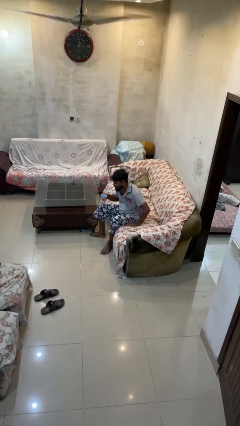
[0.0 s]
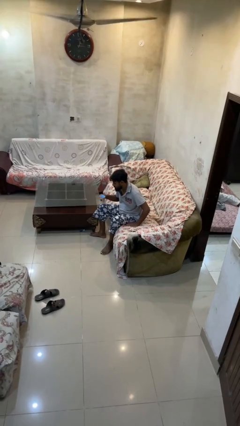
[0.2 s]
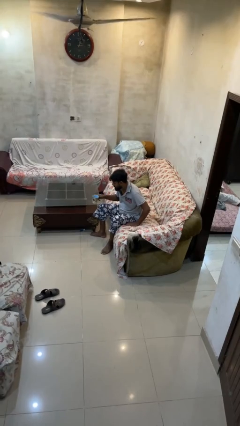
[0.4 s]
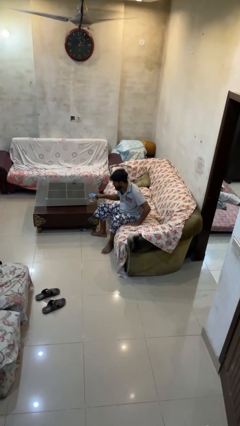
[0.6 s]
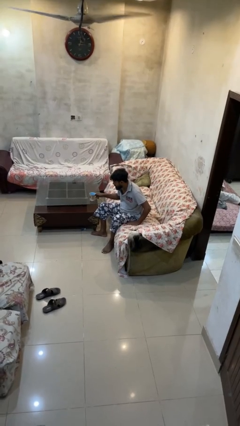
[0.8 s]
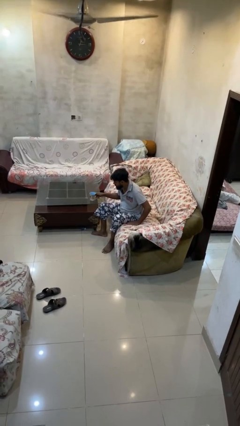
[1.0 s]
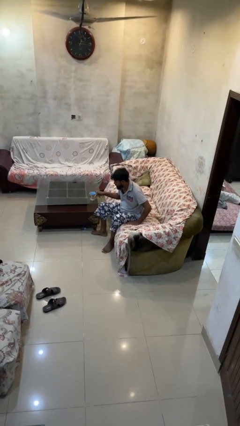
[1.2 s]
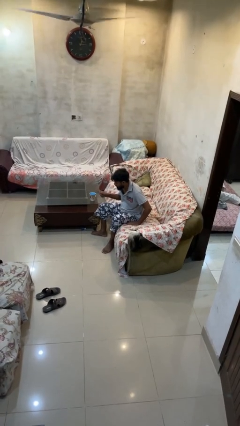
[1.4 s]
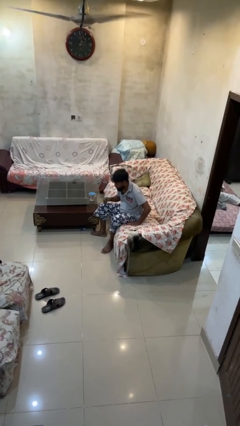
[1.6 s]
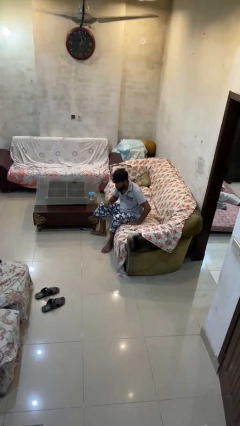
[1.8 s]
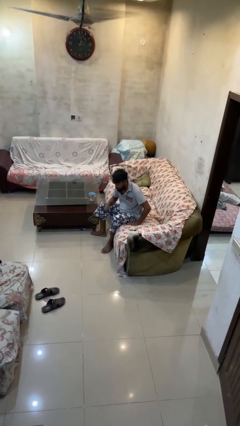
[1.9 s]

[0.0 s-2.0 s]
person puts down object on table

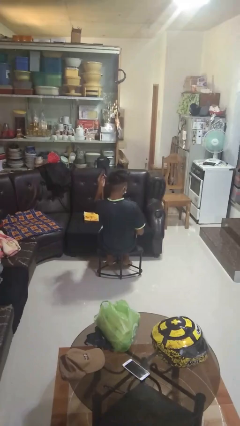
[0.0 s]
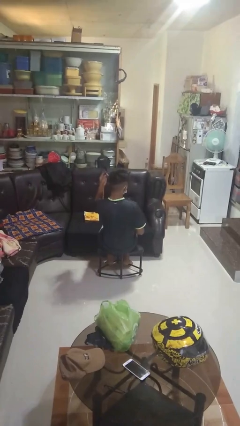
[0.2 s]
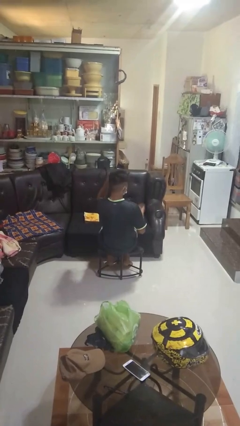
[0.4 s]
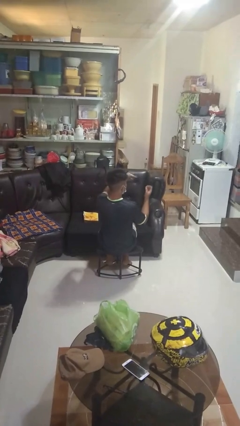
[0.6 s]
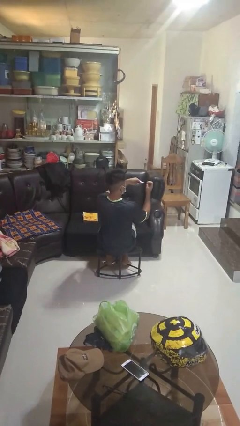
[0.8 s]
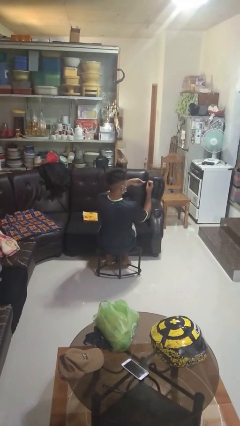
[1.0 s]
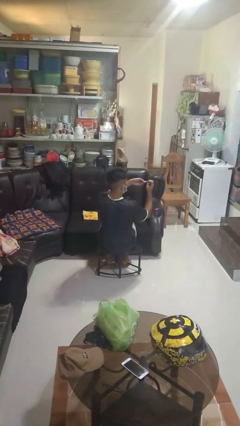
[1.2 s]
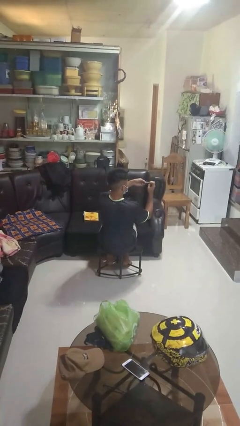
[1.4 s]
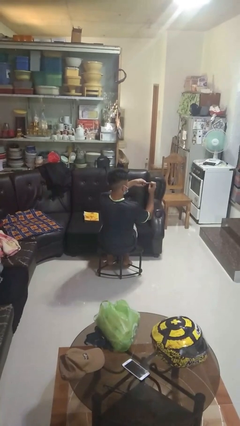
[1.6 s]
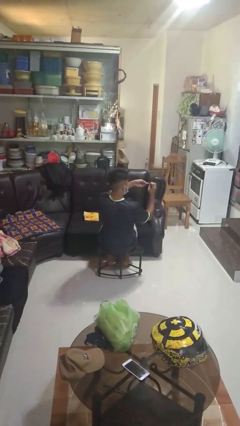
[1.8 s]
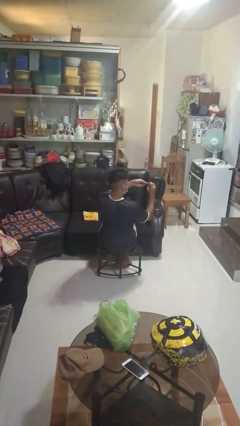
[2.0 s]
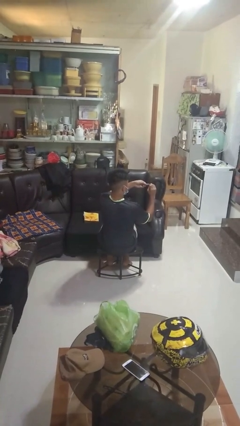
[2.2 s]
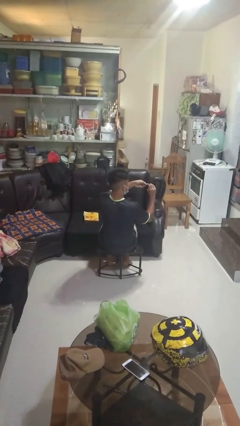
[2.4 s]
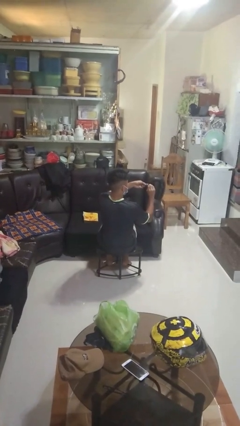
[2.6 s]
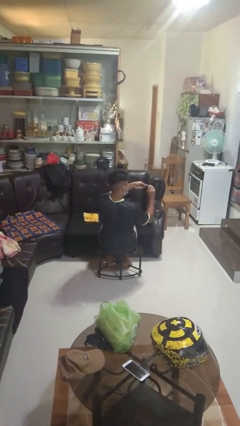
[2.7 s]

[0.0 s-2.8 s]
person clips fingernails

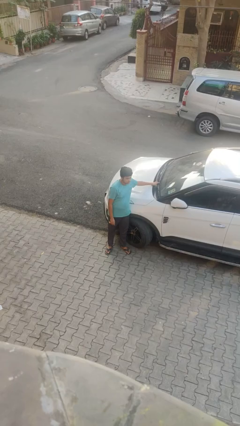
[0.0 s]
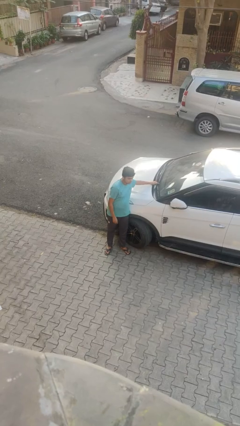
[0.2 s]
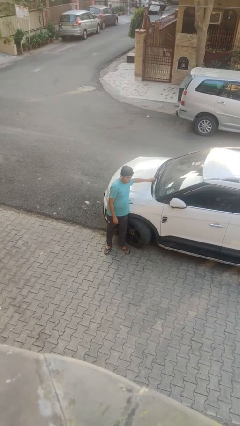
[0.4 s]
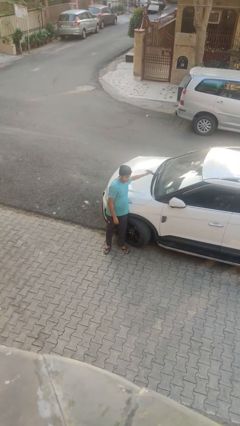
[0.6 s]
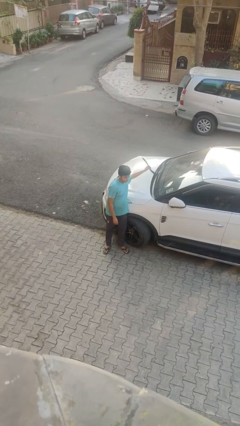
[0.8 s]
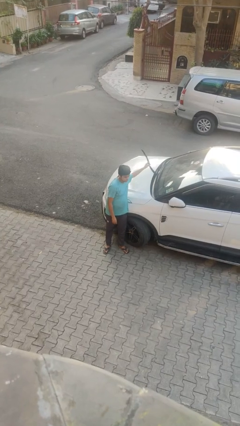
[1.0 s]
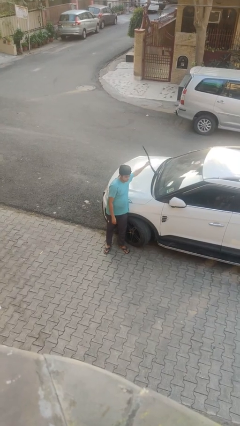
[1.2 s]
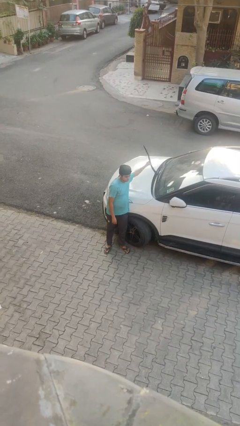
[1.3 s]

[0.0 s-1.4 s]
person flips up car wipers

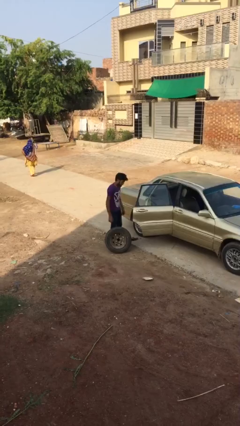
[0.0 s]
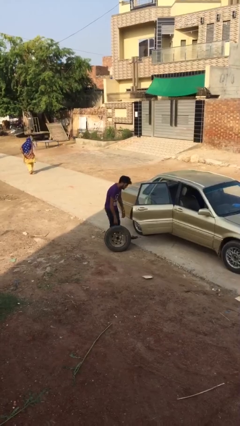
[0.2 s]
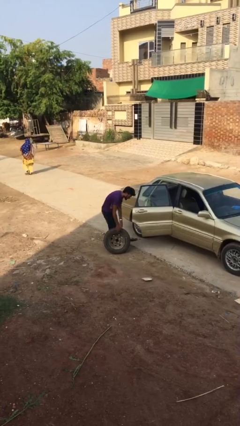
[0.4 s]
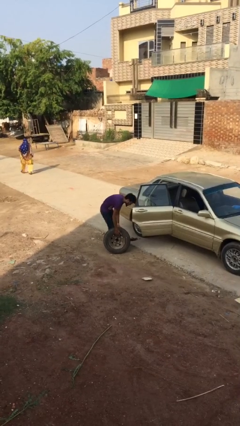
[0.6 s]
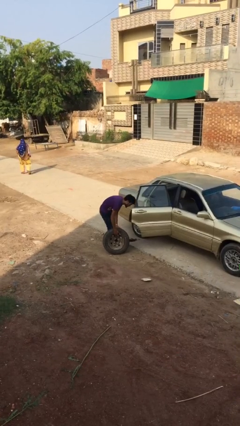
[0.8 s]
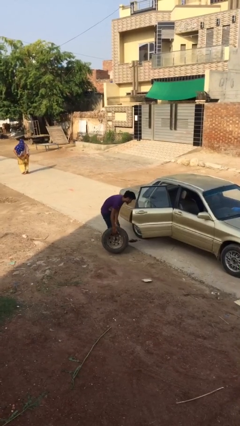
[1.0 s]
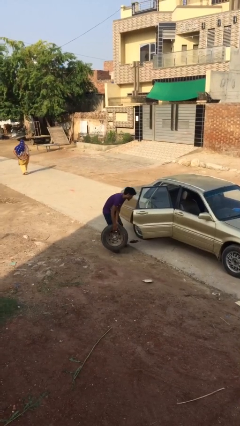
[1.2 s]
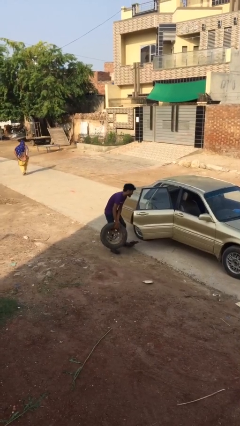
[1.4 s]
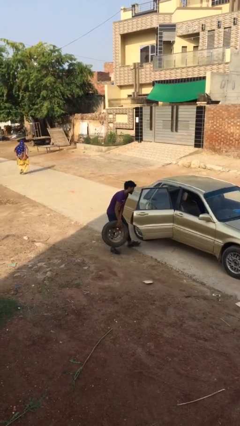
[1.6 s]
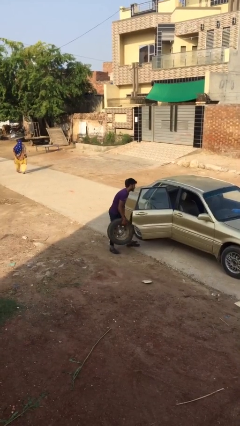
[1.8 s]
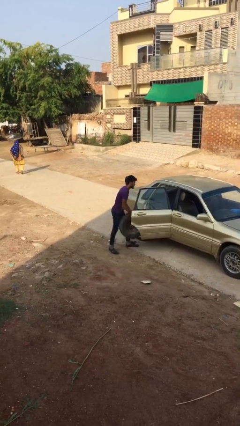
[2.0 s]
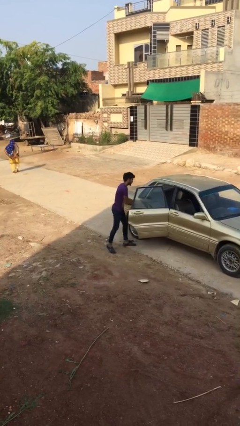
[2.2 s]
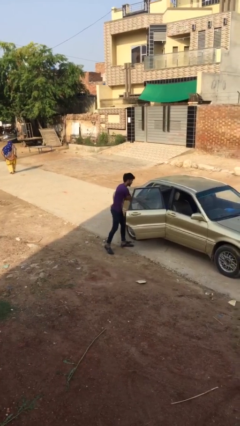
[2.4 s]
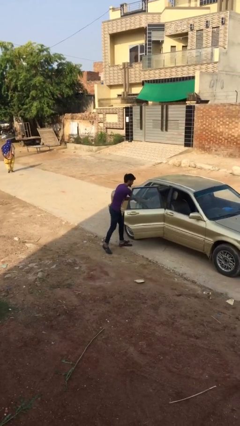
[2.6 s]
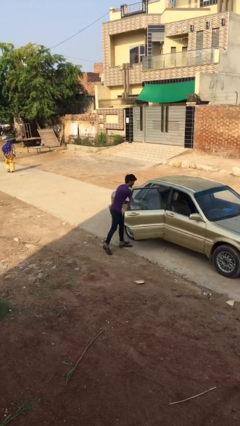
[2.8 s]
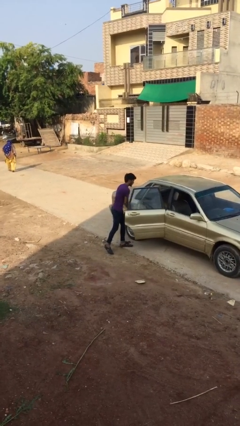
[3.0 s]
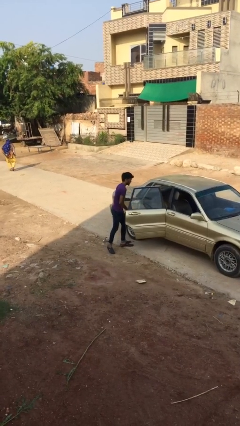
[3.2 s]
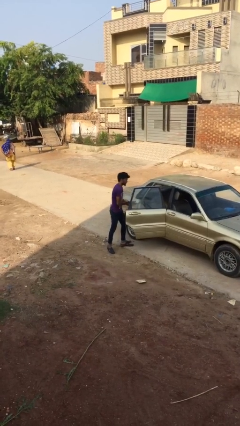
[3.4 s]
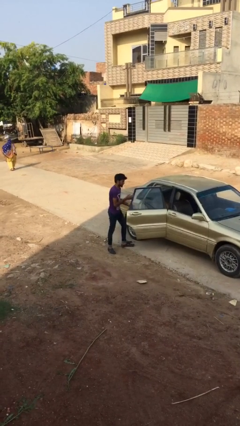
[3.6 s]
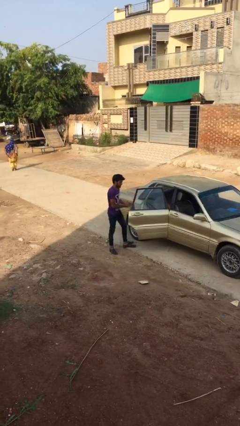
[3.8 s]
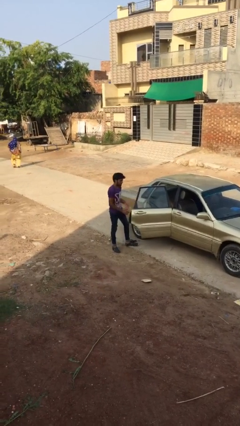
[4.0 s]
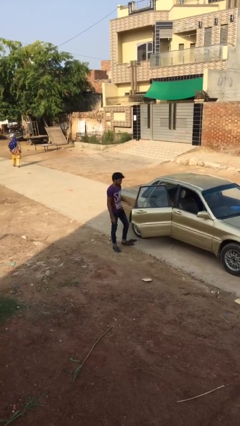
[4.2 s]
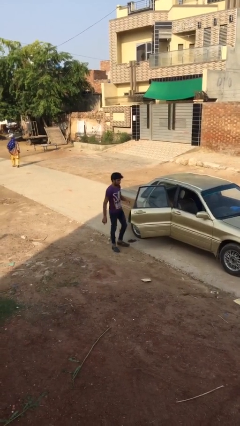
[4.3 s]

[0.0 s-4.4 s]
person loads car

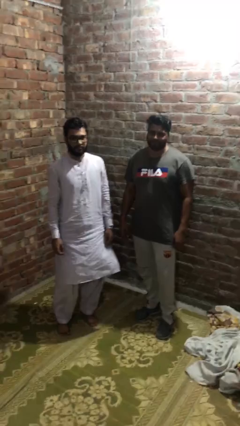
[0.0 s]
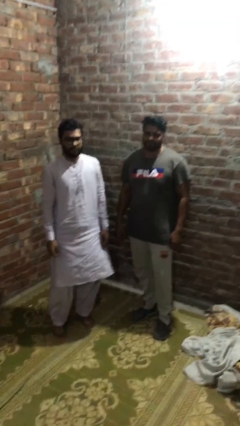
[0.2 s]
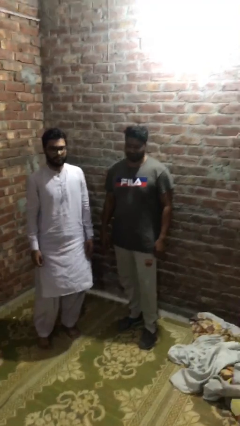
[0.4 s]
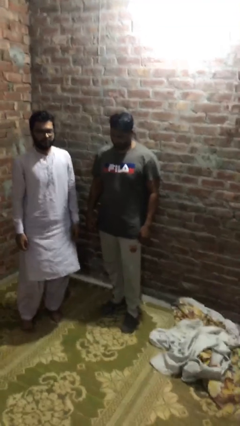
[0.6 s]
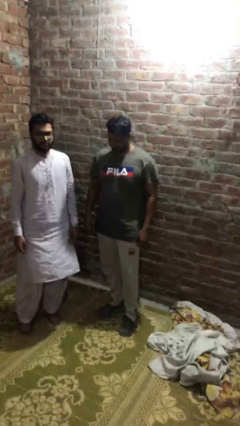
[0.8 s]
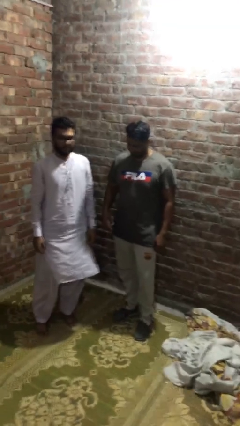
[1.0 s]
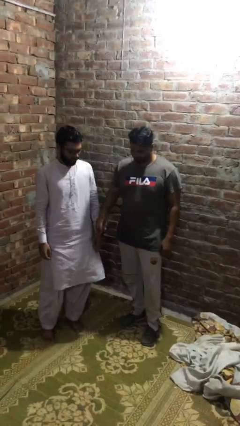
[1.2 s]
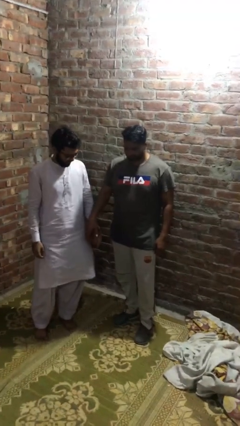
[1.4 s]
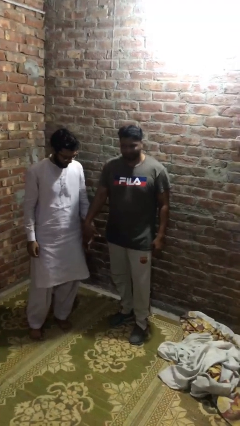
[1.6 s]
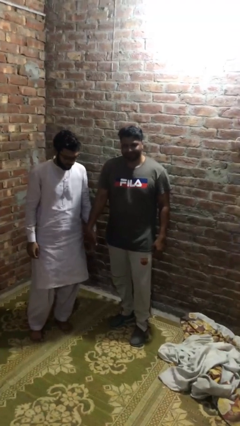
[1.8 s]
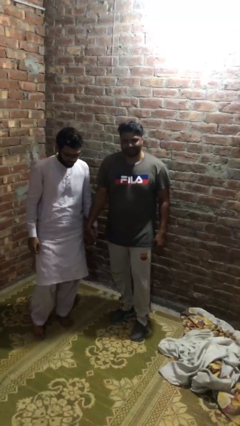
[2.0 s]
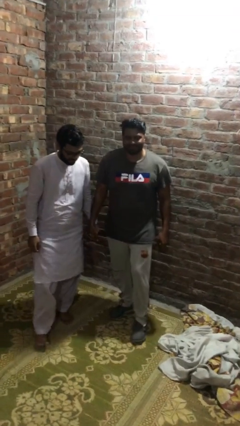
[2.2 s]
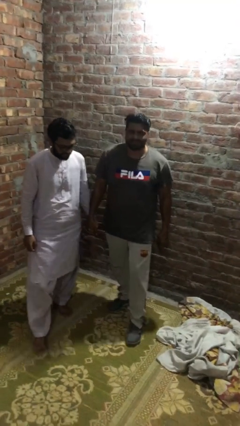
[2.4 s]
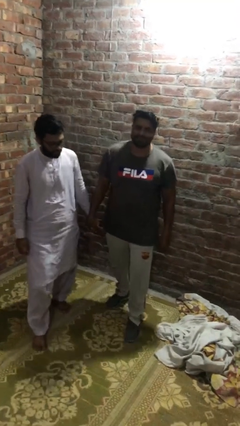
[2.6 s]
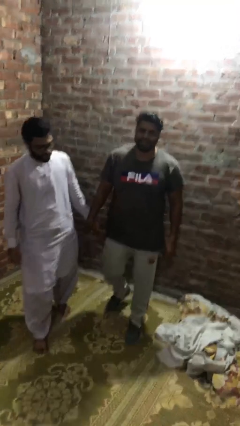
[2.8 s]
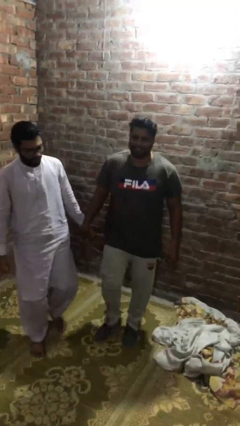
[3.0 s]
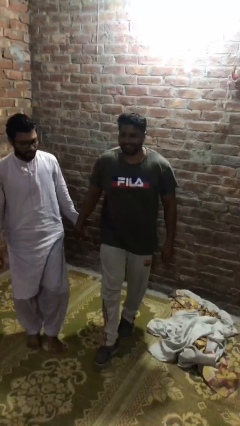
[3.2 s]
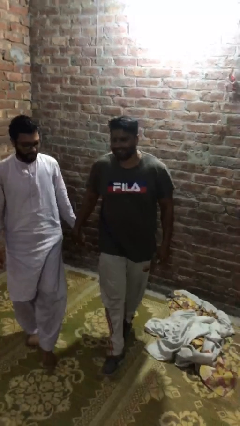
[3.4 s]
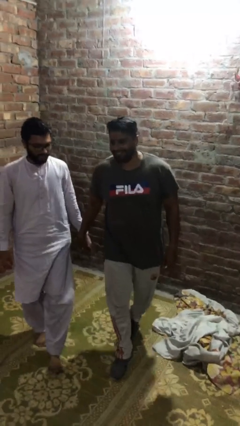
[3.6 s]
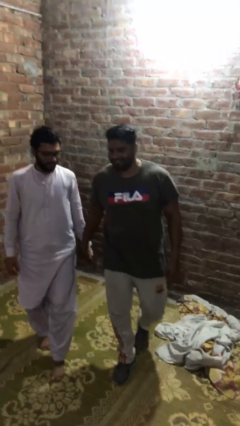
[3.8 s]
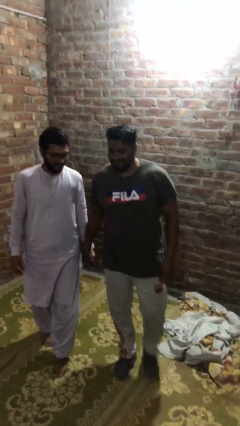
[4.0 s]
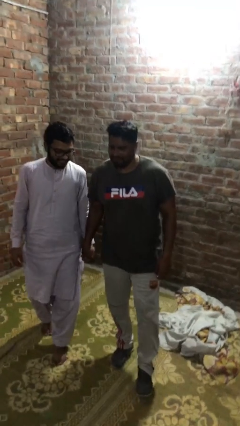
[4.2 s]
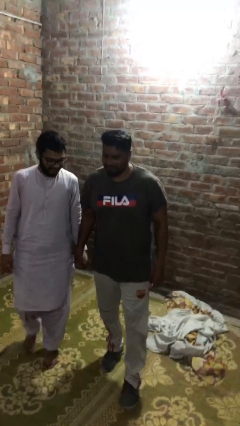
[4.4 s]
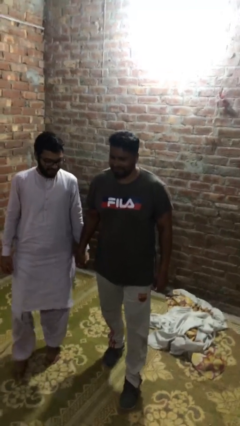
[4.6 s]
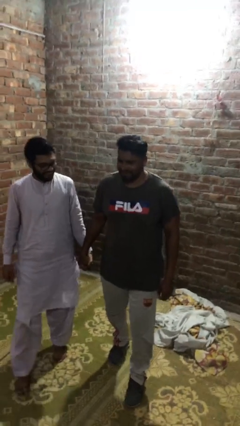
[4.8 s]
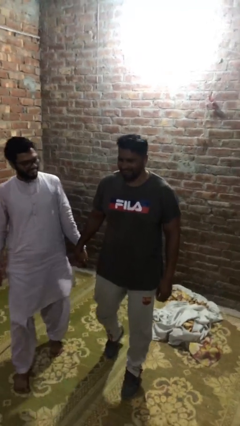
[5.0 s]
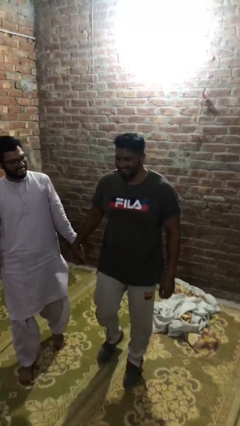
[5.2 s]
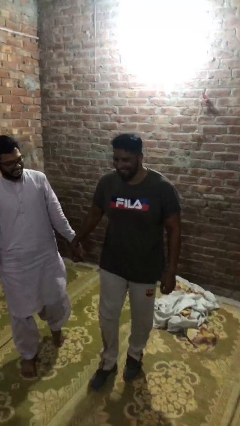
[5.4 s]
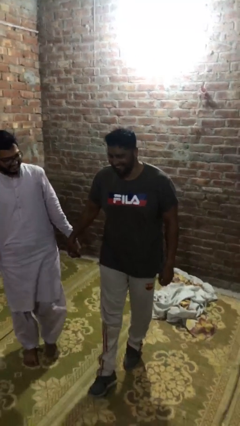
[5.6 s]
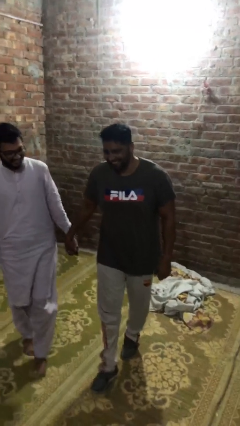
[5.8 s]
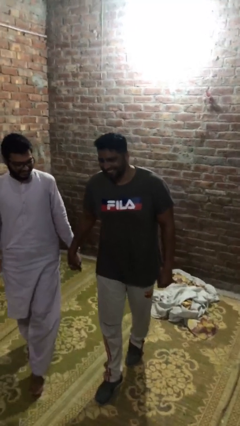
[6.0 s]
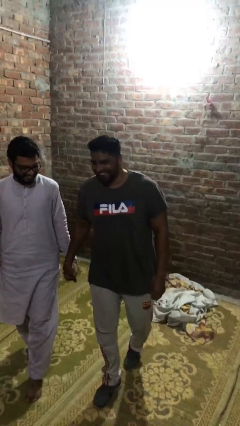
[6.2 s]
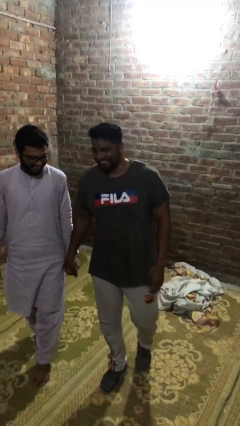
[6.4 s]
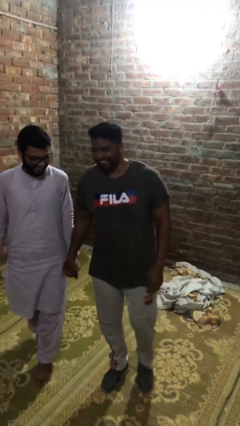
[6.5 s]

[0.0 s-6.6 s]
person holds hand

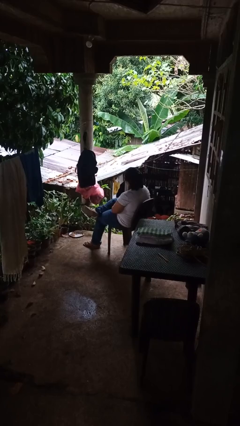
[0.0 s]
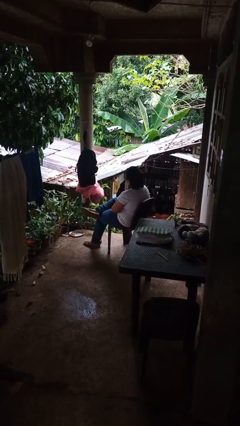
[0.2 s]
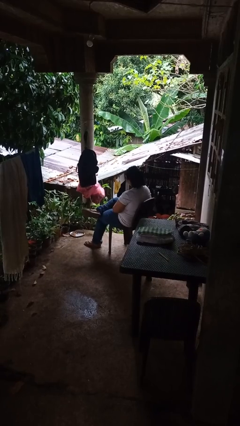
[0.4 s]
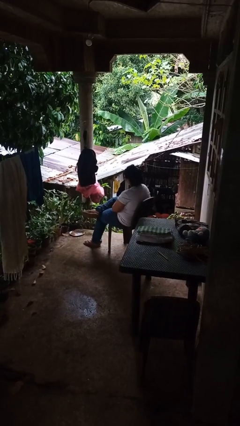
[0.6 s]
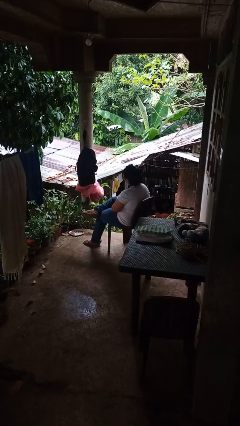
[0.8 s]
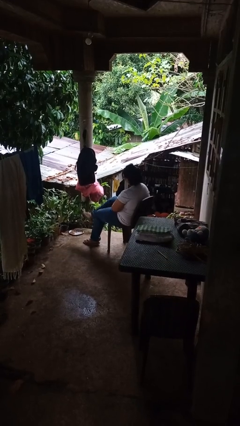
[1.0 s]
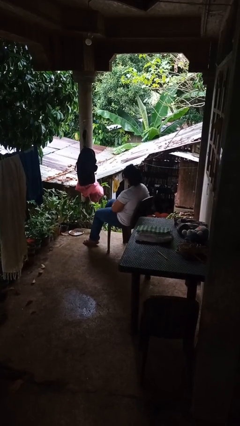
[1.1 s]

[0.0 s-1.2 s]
person crosses legs
